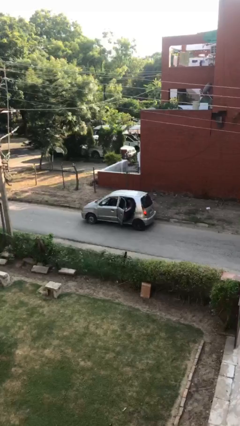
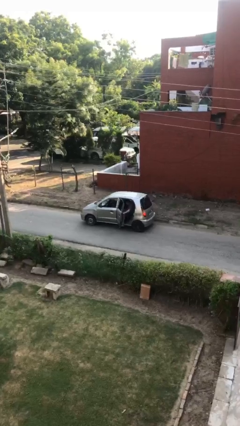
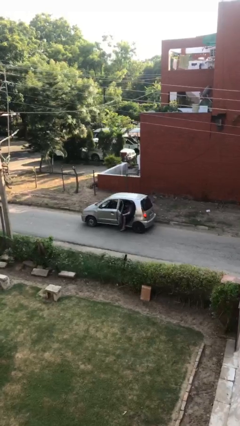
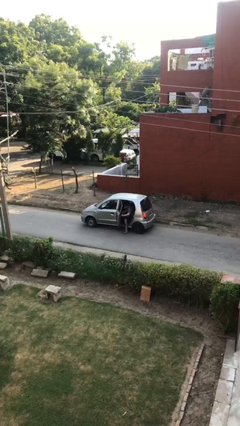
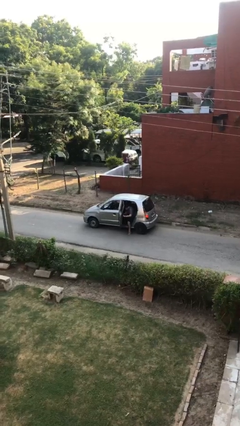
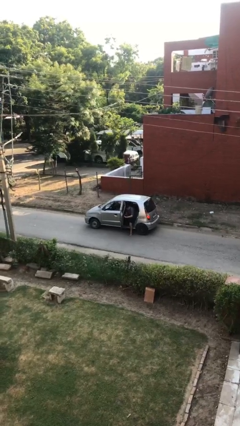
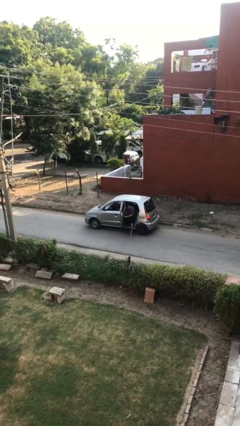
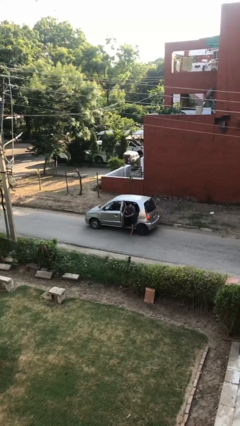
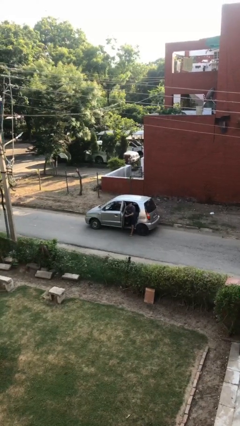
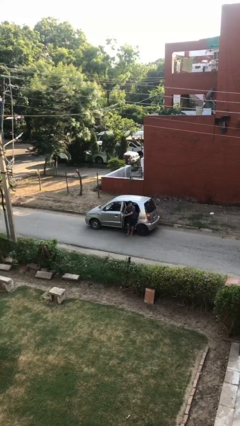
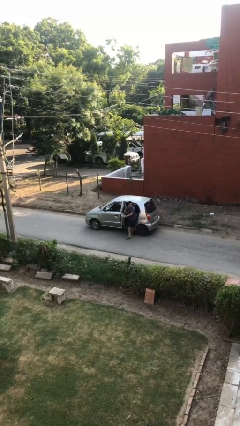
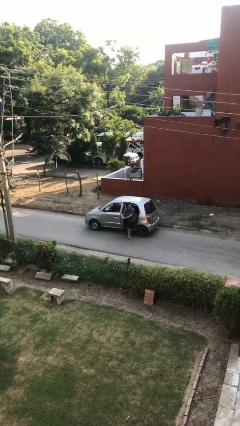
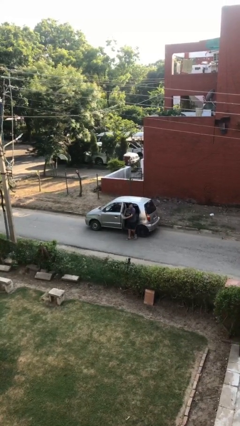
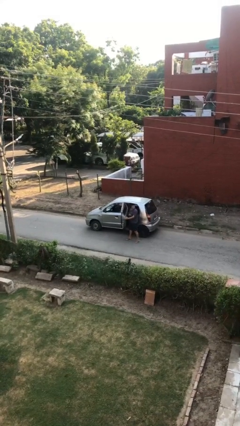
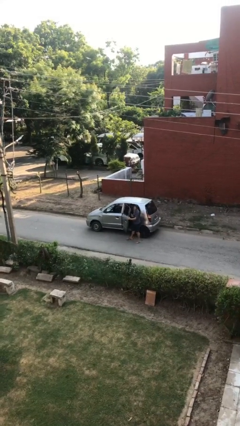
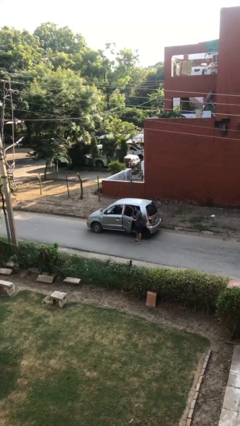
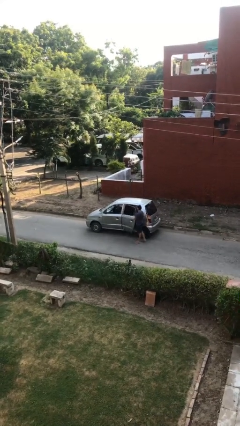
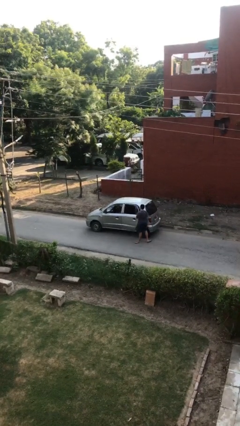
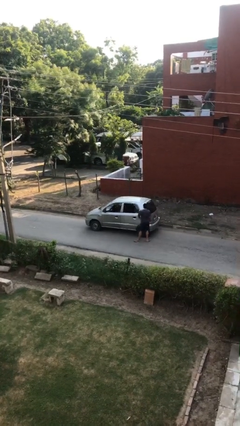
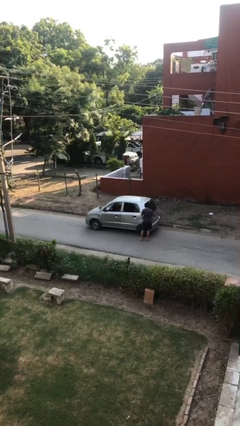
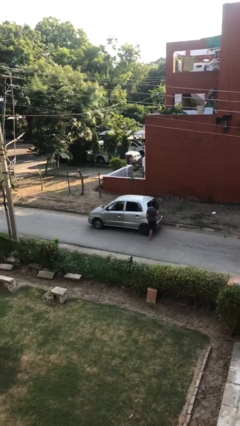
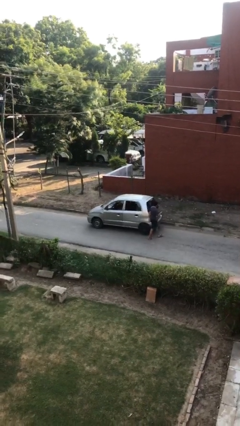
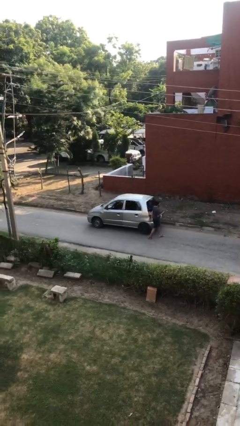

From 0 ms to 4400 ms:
car drops off person

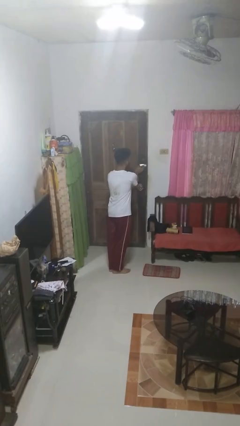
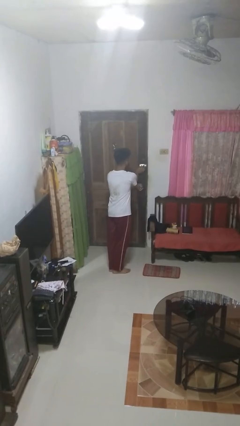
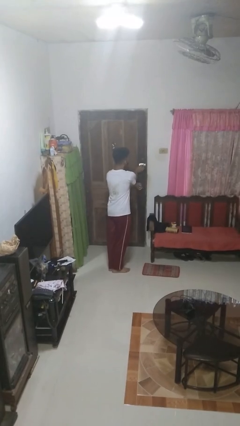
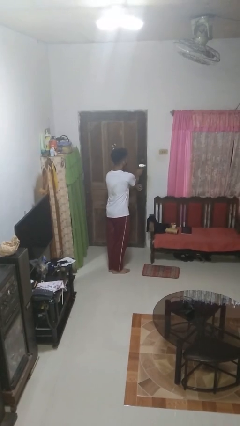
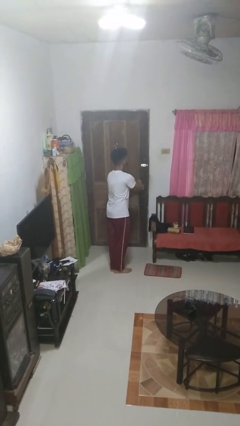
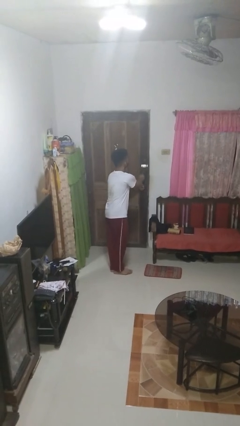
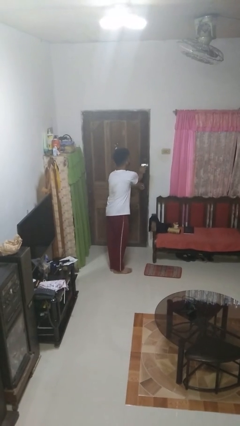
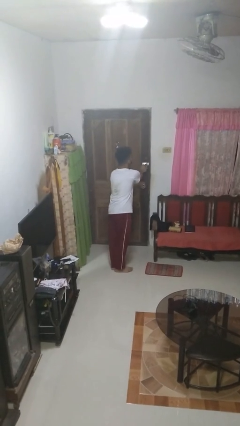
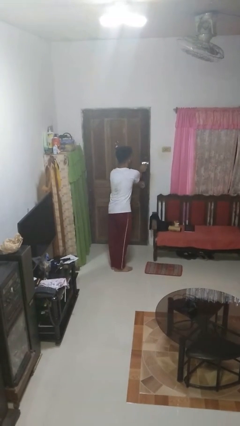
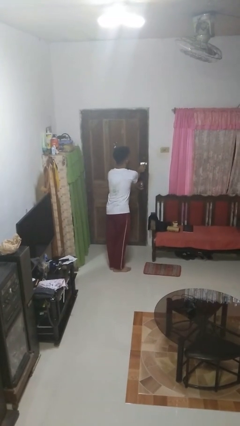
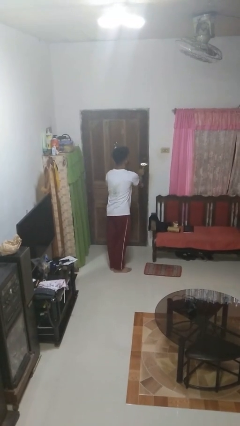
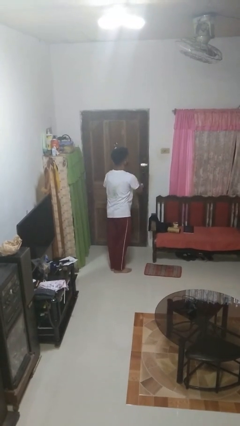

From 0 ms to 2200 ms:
person locks door with keys

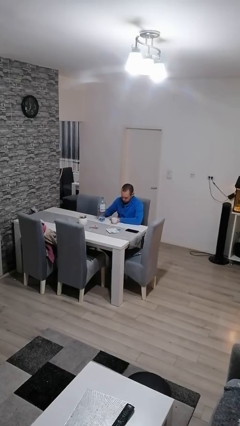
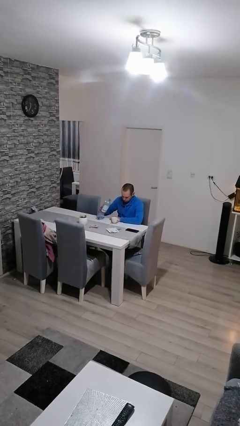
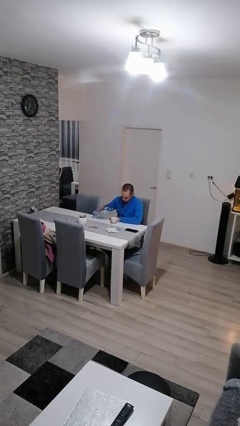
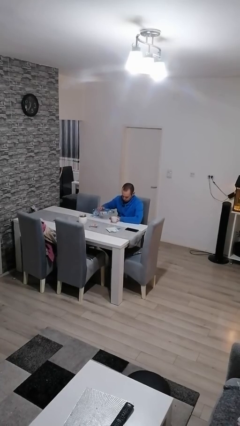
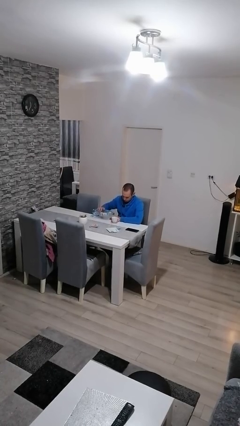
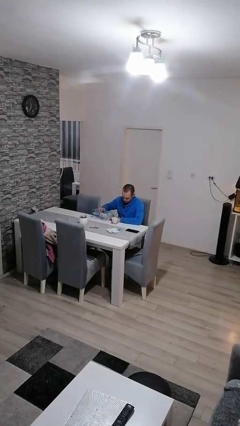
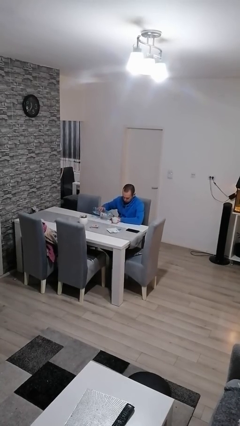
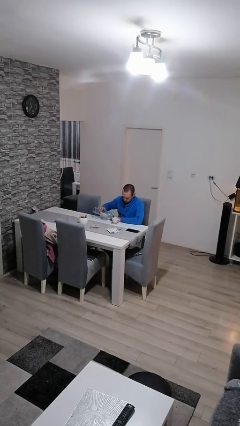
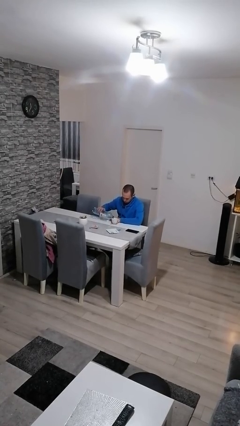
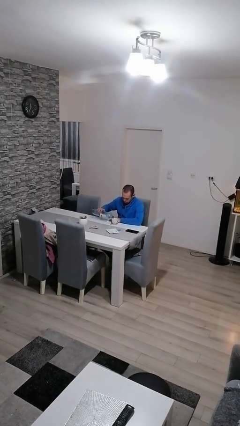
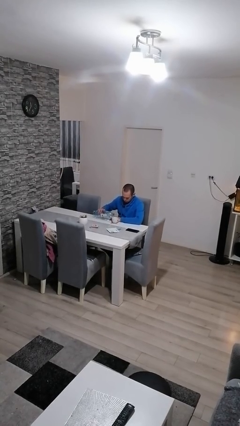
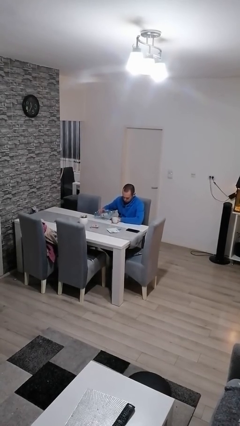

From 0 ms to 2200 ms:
person pours liquid into cup

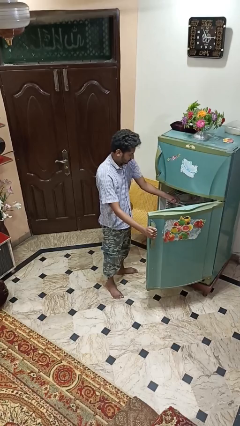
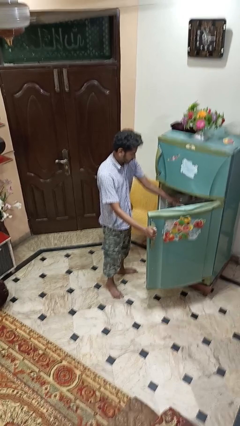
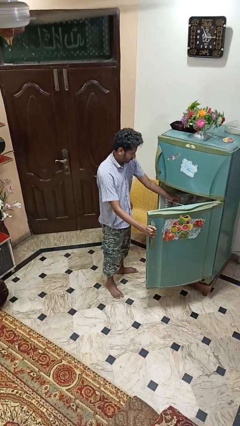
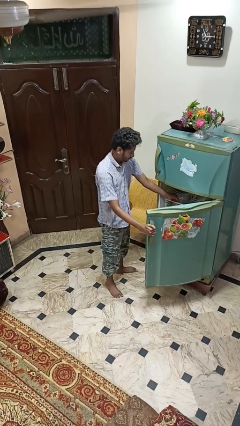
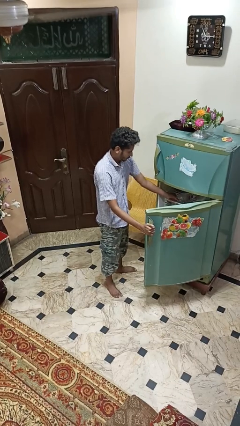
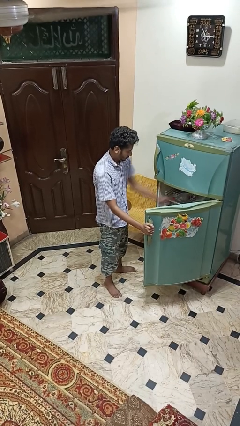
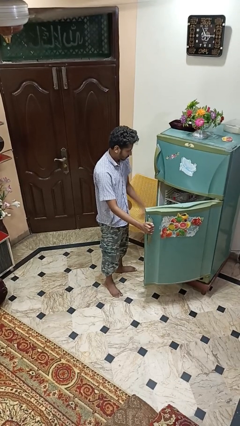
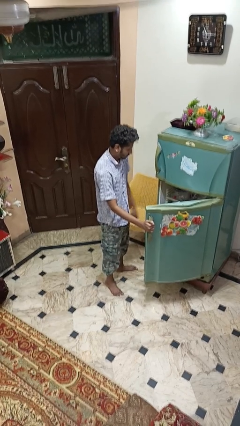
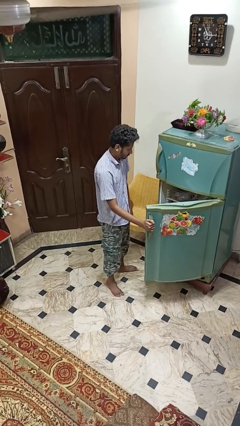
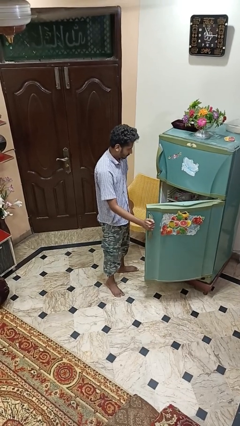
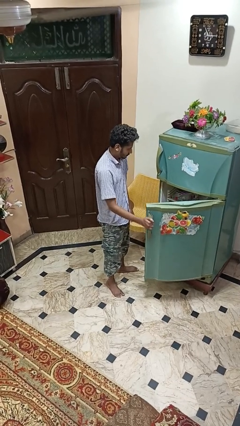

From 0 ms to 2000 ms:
person puts object into refrigerator

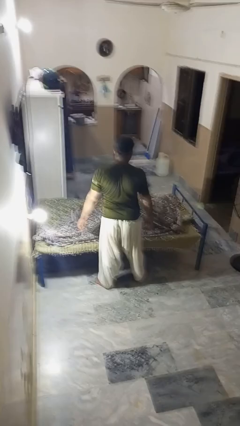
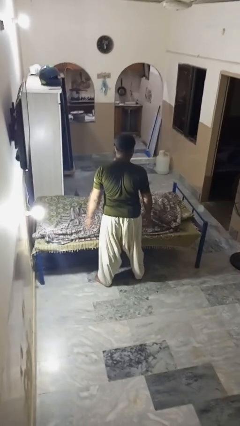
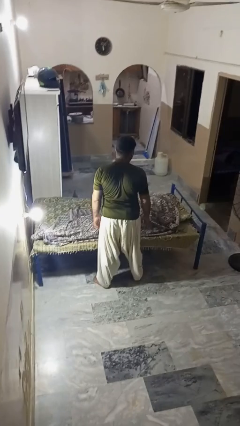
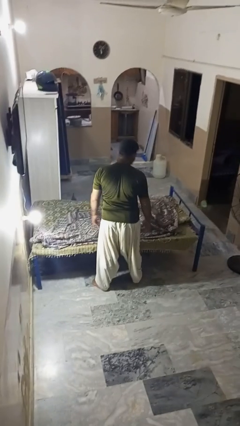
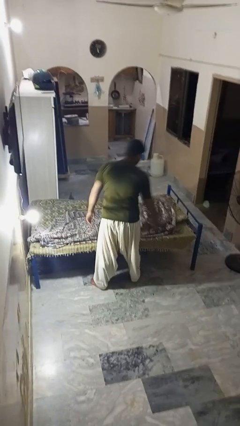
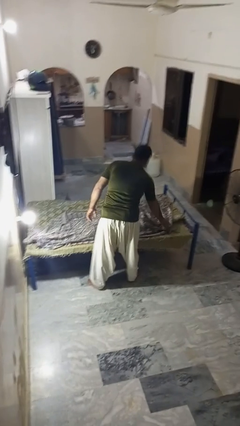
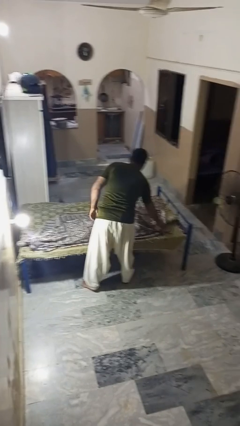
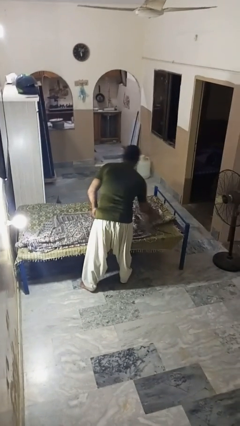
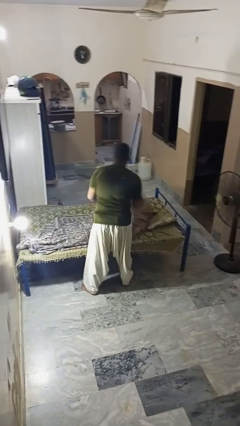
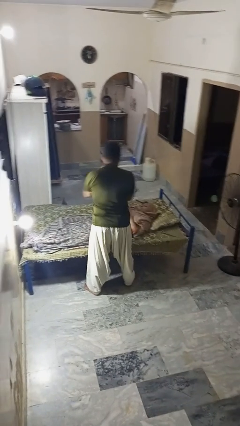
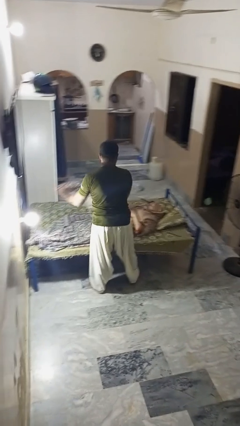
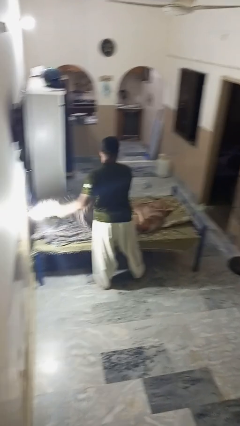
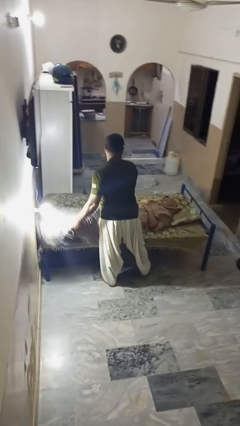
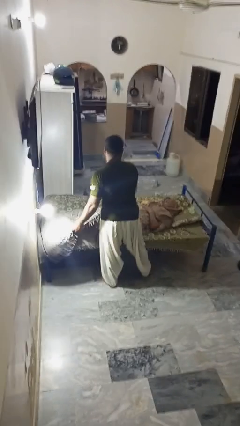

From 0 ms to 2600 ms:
person uncovers friend with blanket

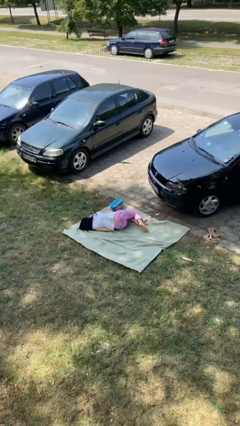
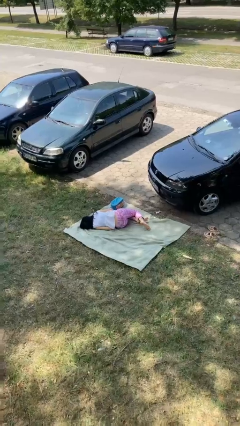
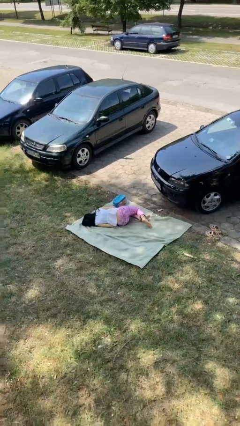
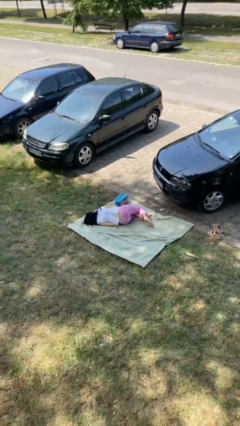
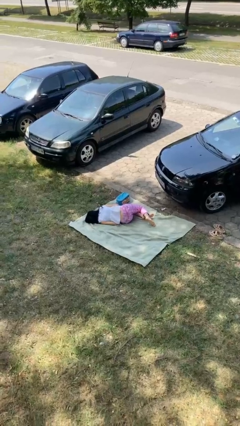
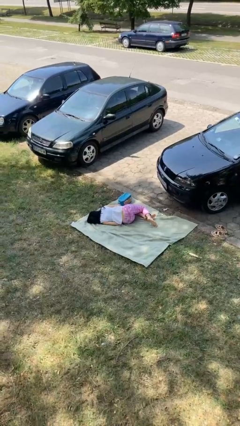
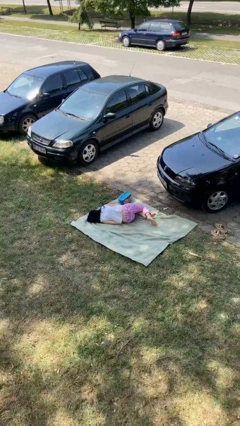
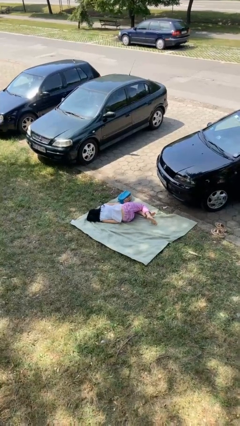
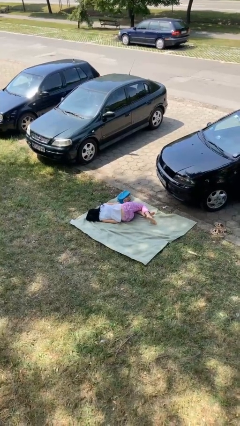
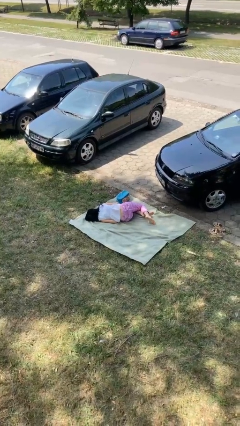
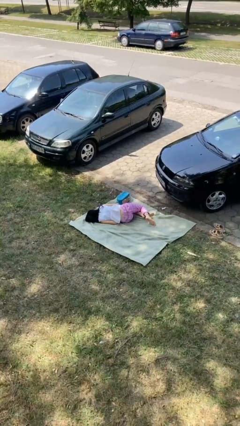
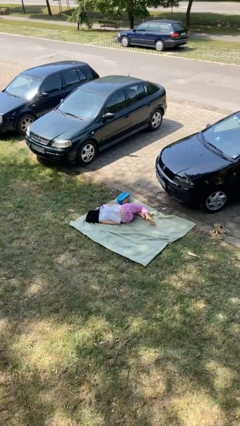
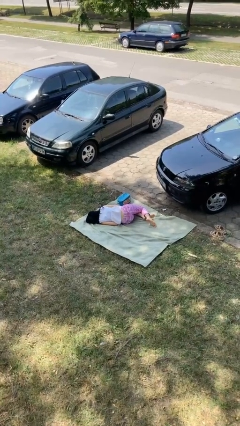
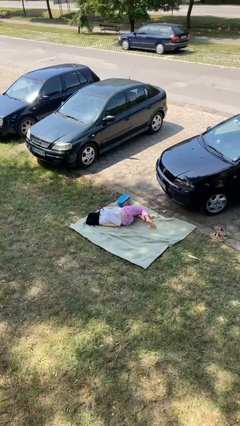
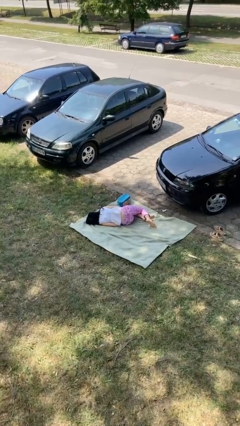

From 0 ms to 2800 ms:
person lies down on floor

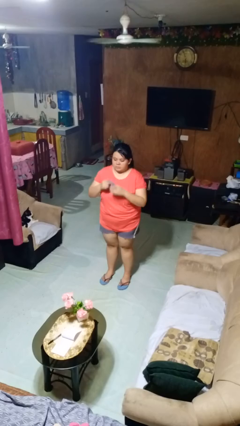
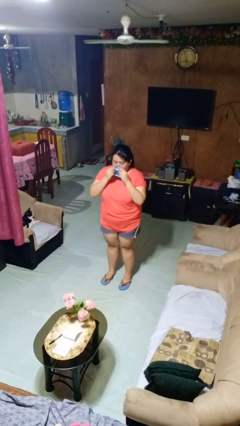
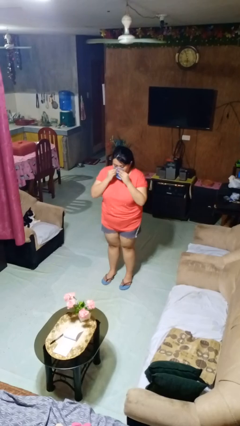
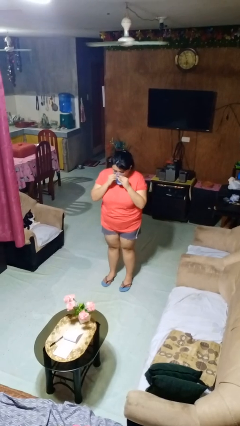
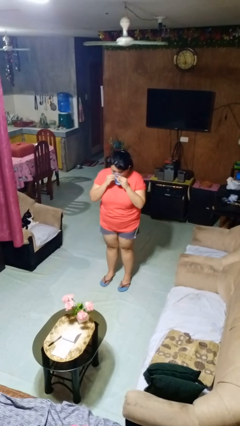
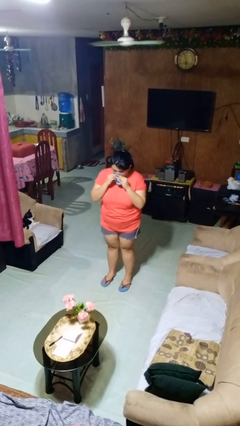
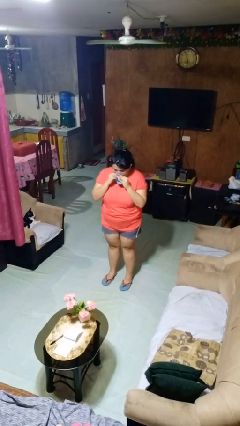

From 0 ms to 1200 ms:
person blows nose
